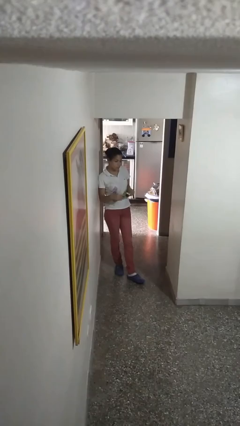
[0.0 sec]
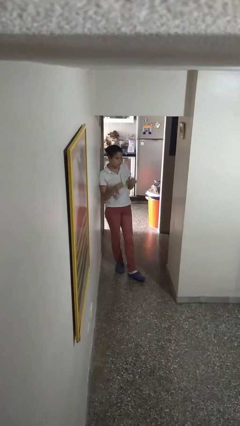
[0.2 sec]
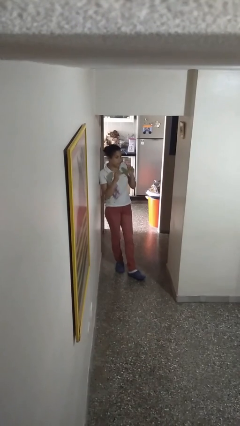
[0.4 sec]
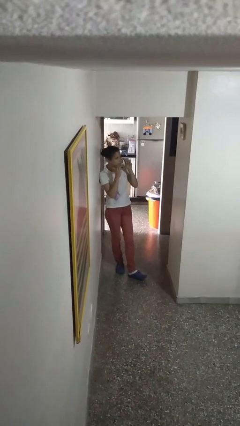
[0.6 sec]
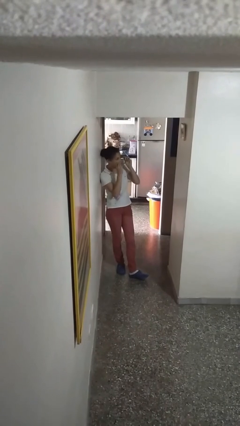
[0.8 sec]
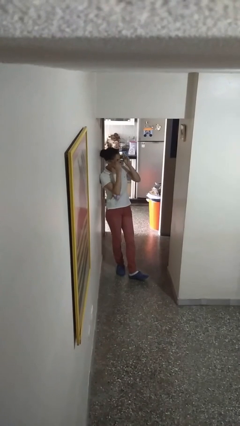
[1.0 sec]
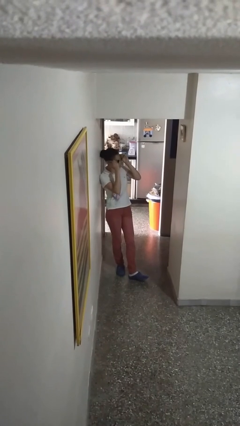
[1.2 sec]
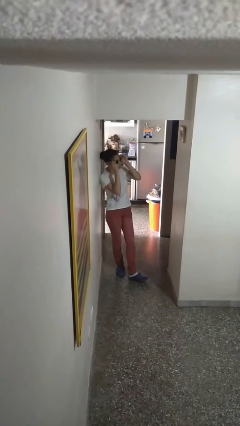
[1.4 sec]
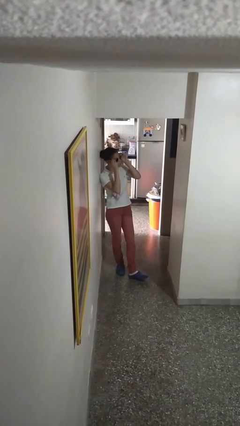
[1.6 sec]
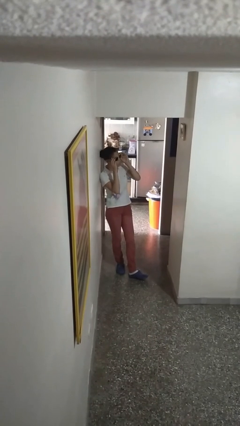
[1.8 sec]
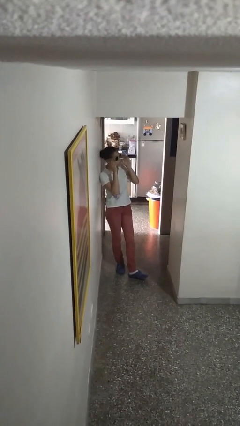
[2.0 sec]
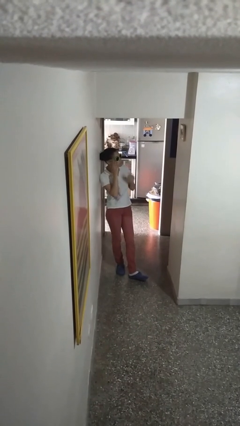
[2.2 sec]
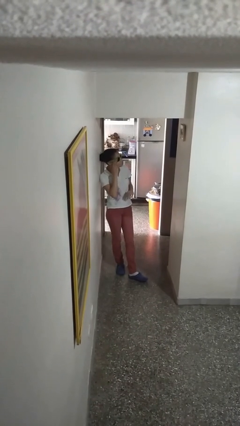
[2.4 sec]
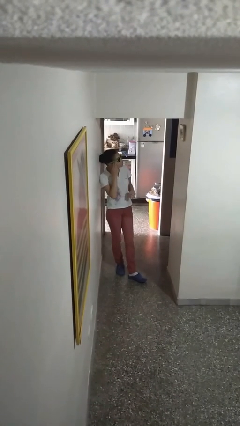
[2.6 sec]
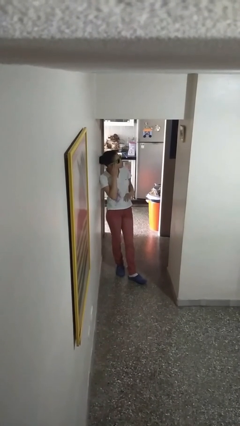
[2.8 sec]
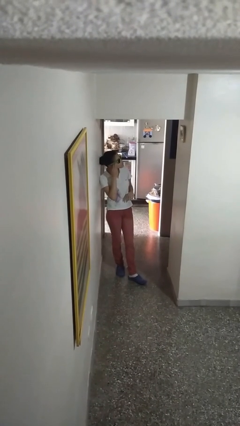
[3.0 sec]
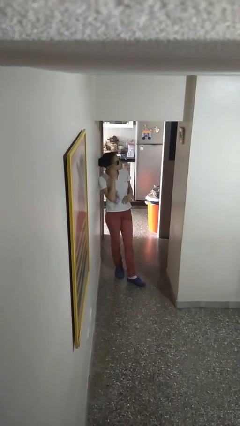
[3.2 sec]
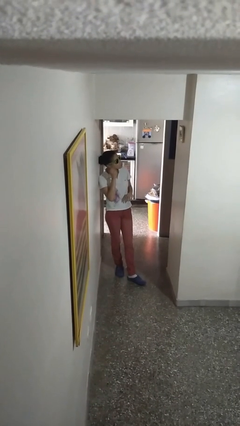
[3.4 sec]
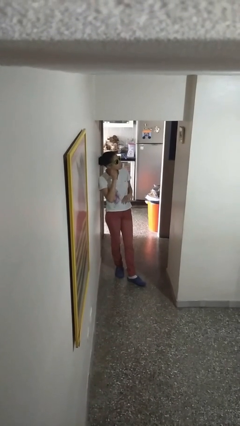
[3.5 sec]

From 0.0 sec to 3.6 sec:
person puts on sunglasses

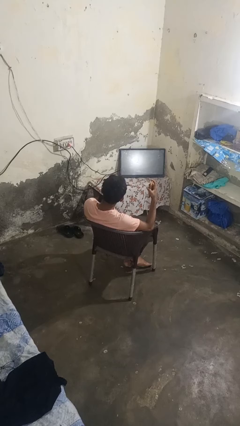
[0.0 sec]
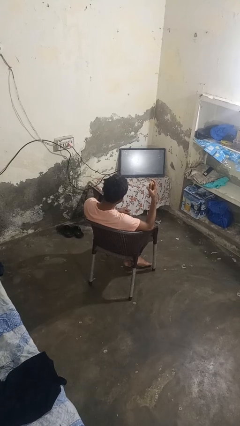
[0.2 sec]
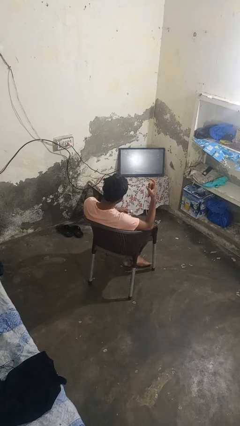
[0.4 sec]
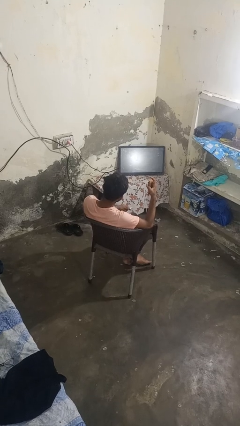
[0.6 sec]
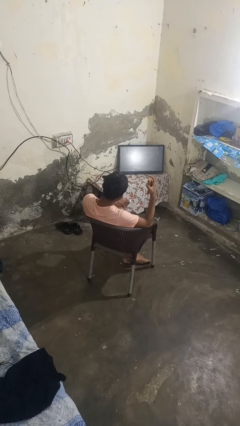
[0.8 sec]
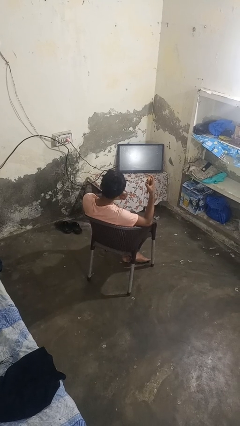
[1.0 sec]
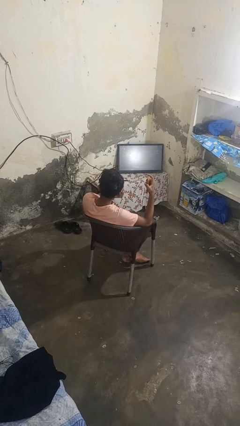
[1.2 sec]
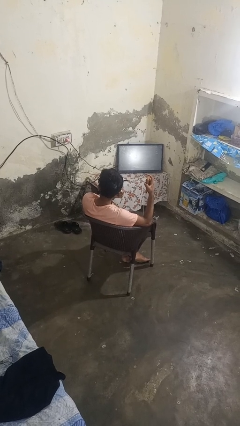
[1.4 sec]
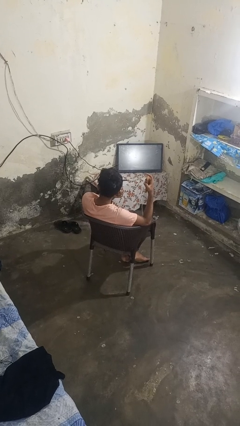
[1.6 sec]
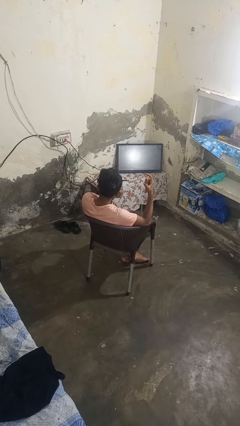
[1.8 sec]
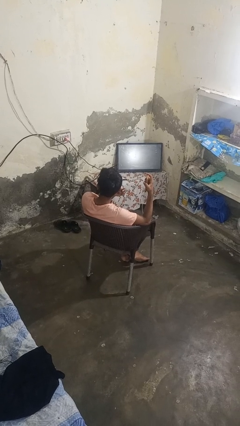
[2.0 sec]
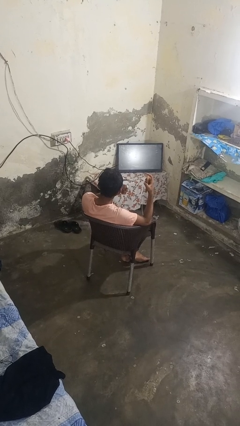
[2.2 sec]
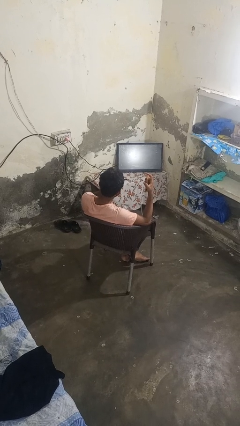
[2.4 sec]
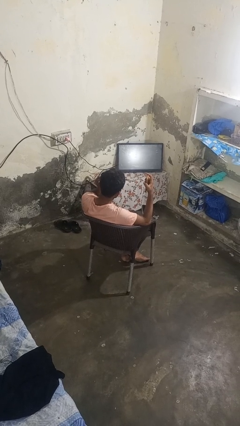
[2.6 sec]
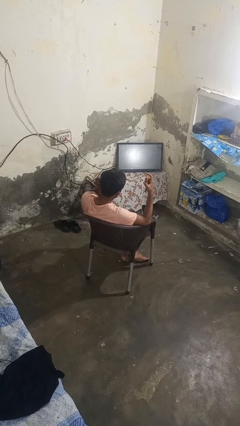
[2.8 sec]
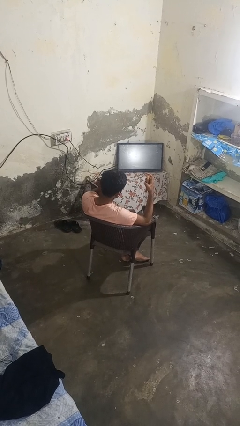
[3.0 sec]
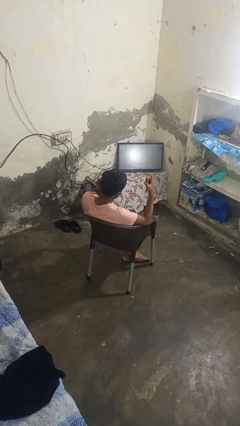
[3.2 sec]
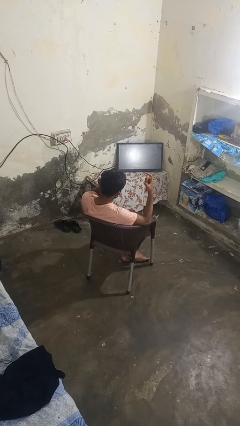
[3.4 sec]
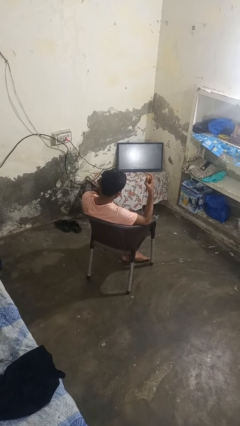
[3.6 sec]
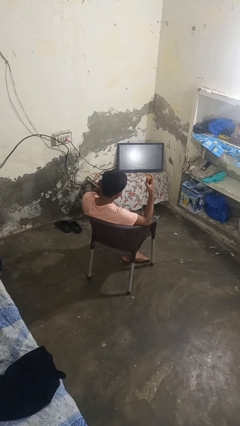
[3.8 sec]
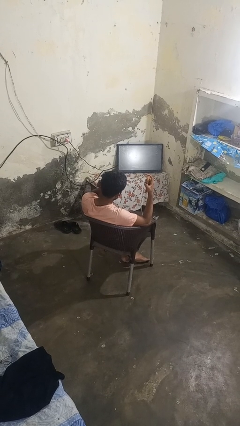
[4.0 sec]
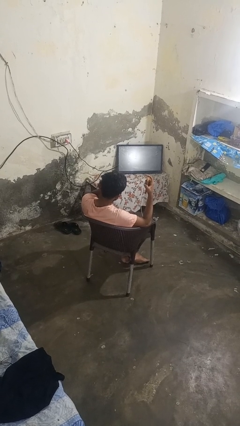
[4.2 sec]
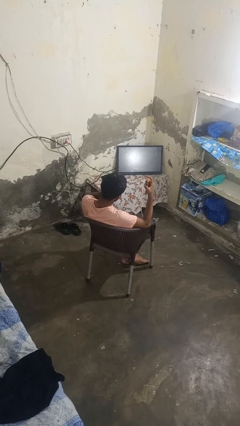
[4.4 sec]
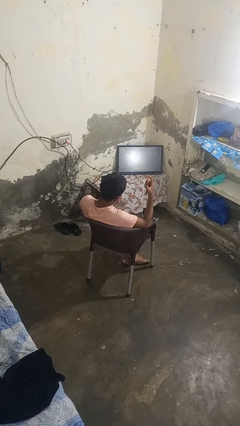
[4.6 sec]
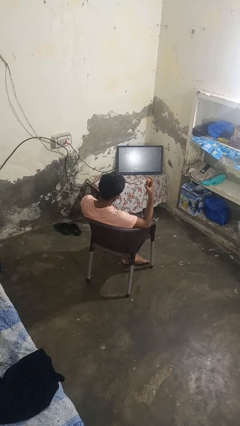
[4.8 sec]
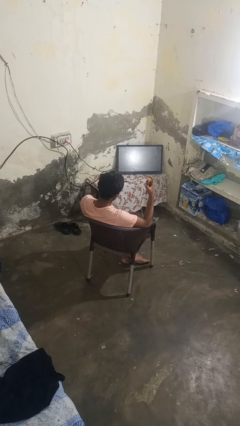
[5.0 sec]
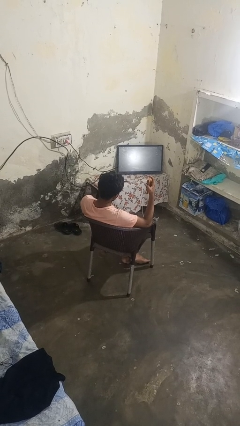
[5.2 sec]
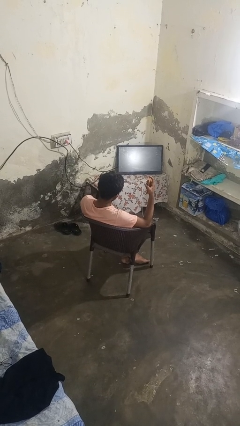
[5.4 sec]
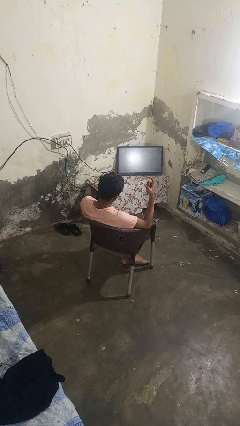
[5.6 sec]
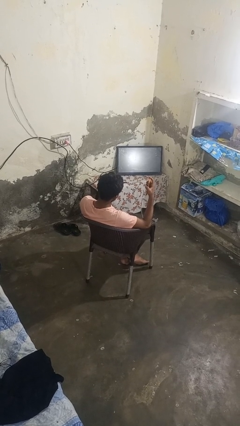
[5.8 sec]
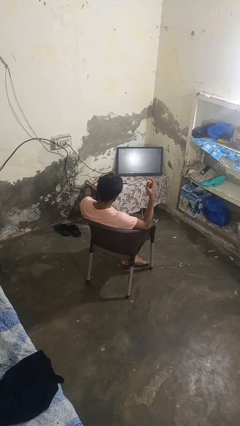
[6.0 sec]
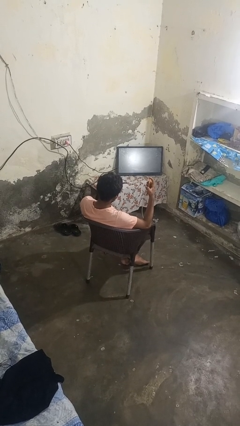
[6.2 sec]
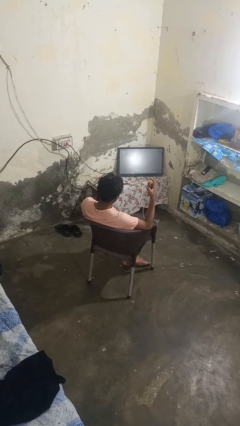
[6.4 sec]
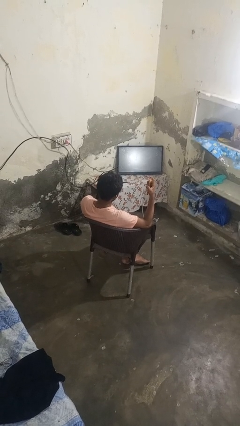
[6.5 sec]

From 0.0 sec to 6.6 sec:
person puts on headphones

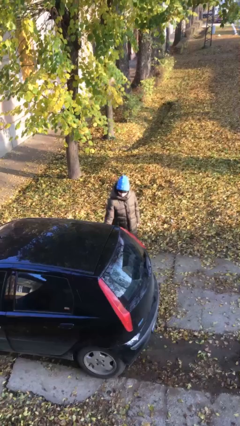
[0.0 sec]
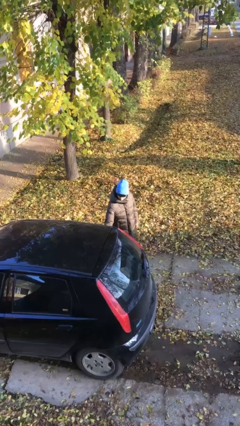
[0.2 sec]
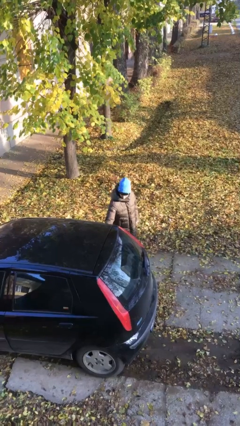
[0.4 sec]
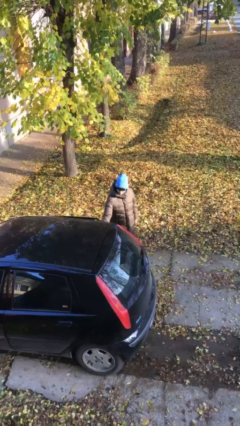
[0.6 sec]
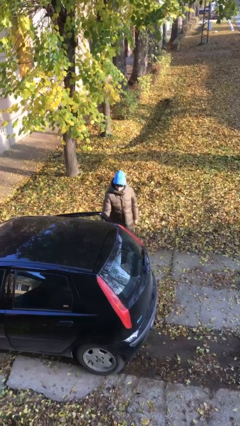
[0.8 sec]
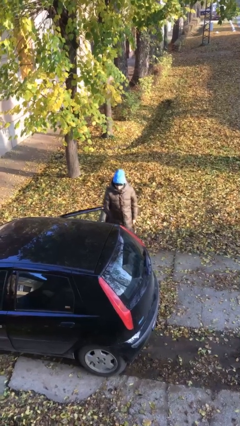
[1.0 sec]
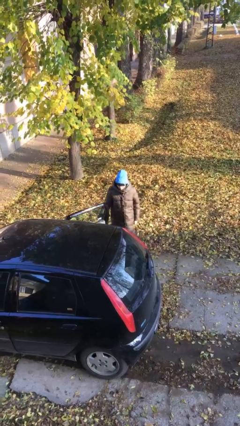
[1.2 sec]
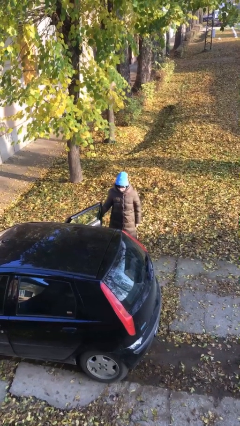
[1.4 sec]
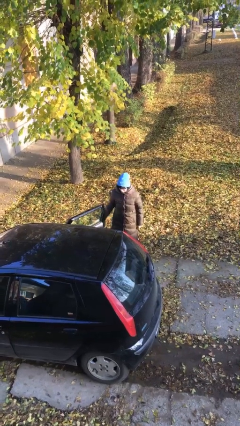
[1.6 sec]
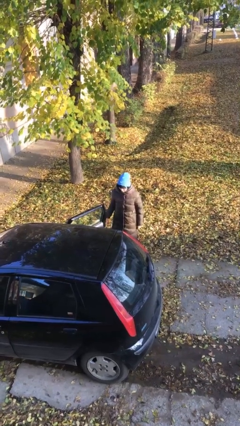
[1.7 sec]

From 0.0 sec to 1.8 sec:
person opens car door

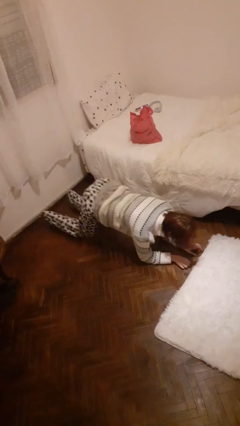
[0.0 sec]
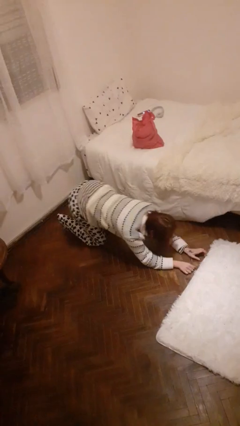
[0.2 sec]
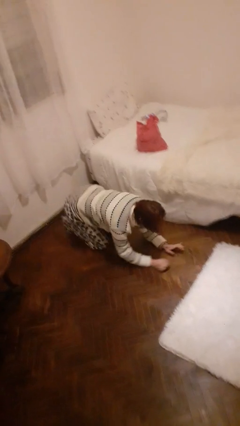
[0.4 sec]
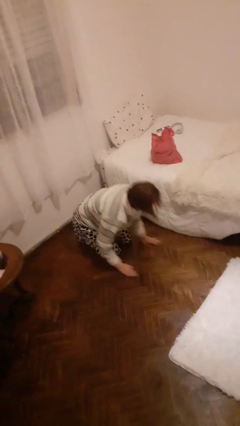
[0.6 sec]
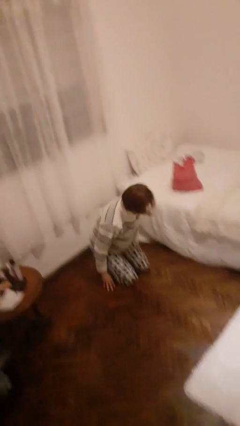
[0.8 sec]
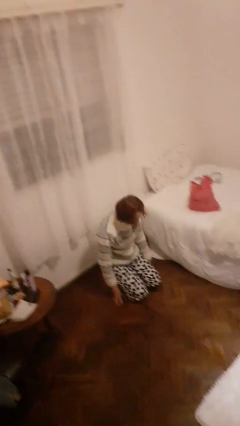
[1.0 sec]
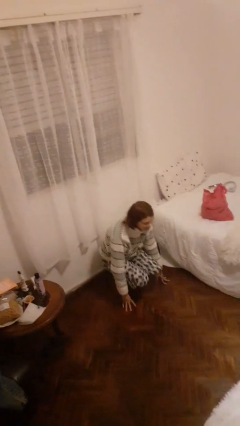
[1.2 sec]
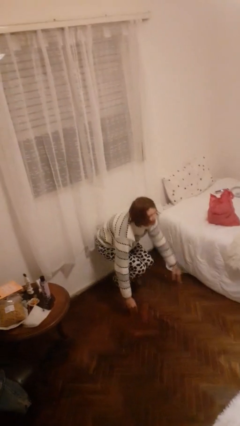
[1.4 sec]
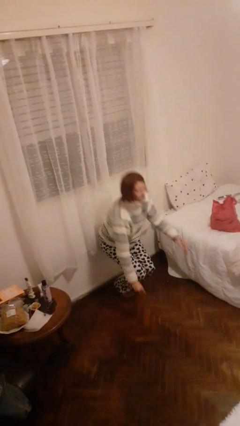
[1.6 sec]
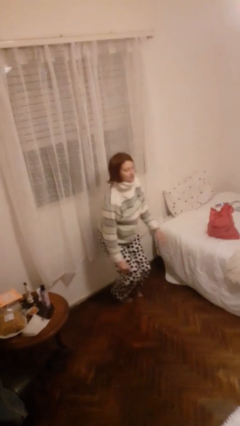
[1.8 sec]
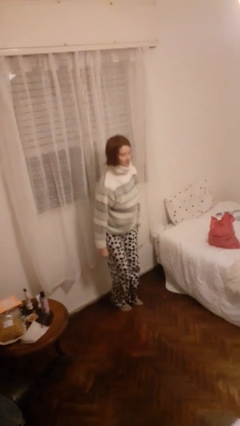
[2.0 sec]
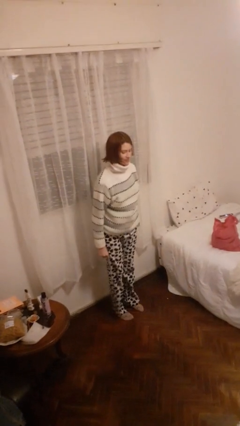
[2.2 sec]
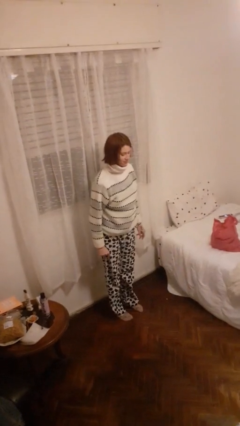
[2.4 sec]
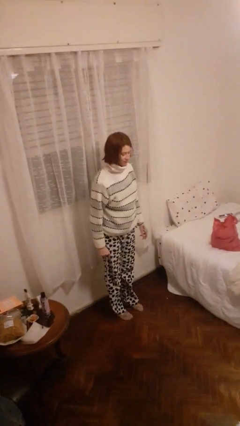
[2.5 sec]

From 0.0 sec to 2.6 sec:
person stands up from floor

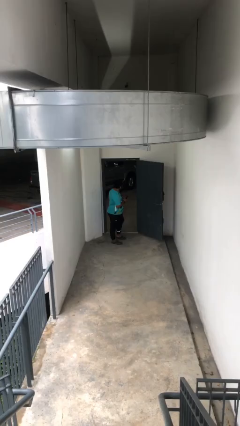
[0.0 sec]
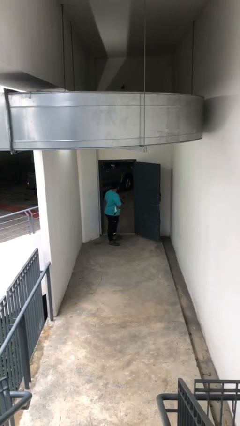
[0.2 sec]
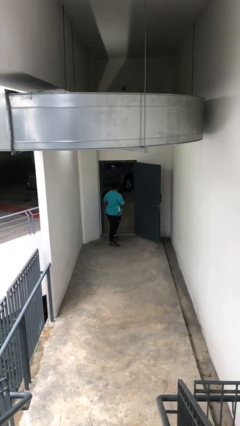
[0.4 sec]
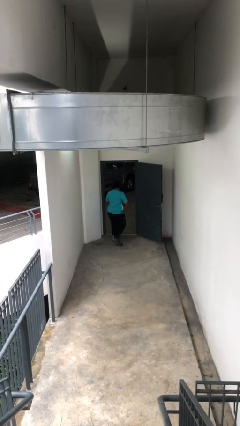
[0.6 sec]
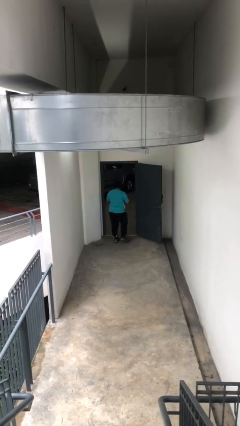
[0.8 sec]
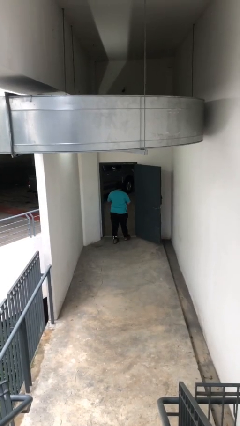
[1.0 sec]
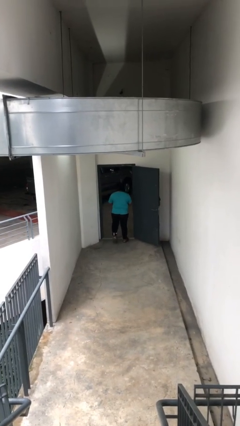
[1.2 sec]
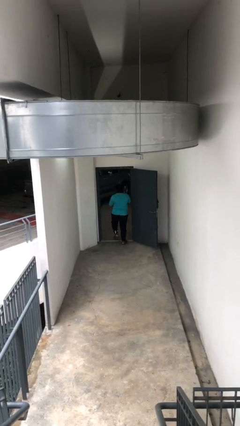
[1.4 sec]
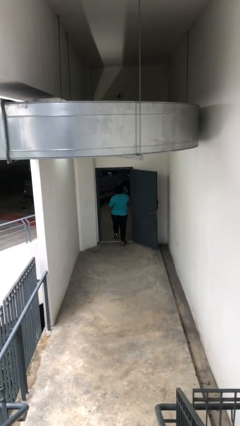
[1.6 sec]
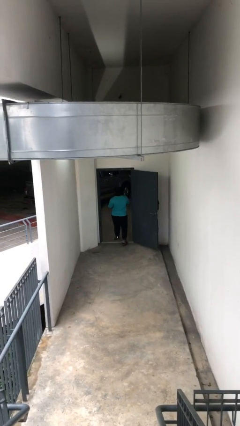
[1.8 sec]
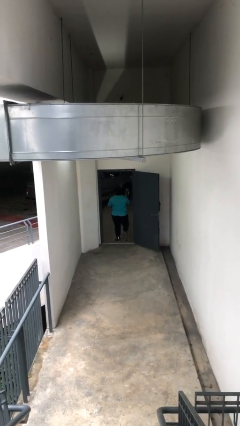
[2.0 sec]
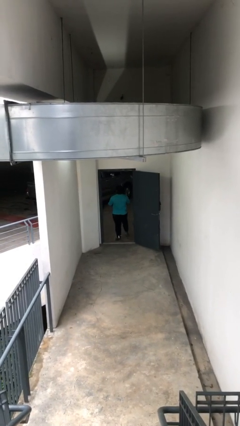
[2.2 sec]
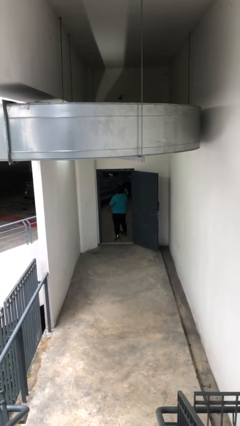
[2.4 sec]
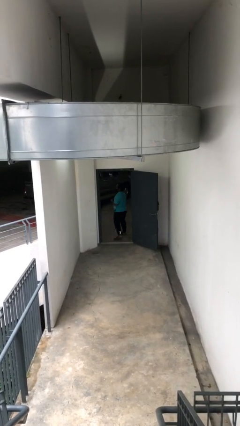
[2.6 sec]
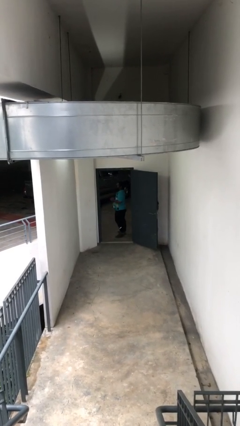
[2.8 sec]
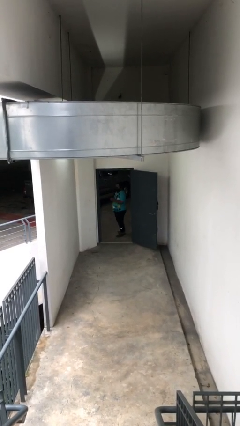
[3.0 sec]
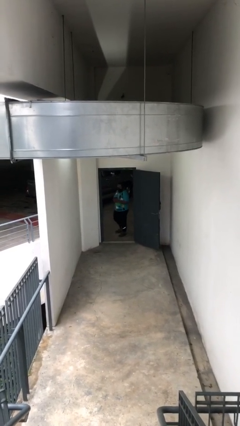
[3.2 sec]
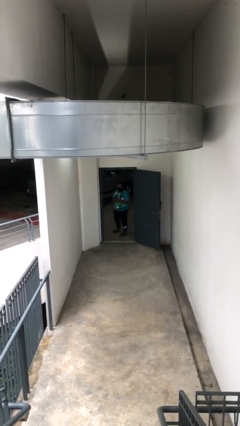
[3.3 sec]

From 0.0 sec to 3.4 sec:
person exits scene through structure
